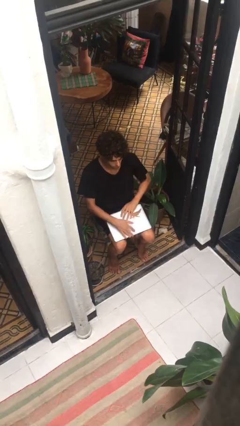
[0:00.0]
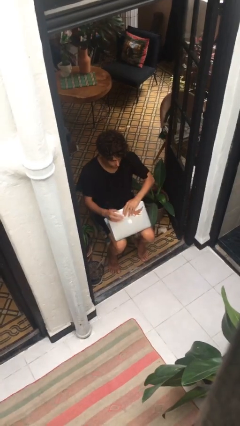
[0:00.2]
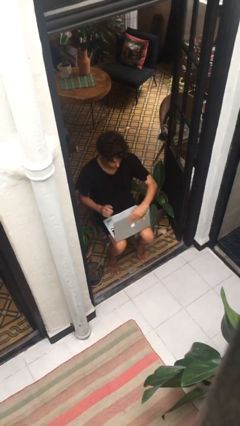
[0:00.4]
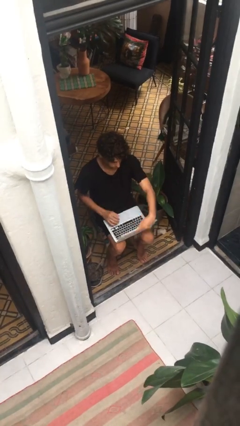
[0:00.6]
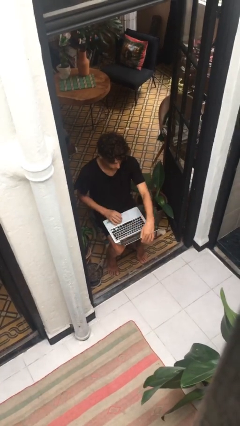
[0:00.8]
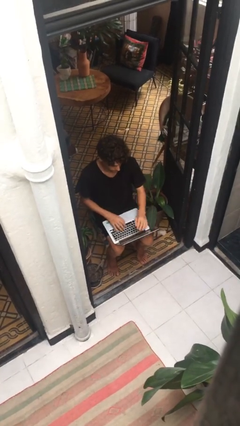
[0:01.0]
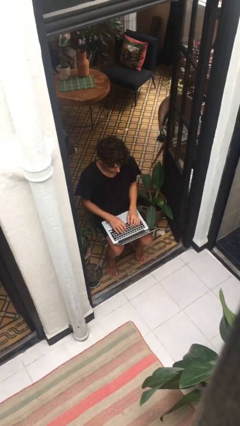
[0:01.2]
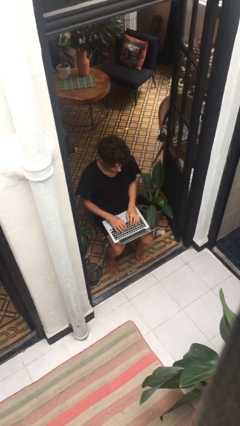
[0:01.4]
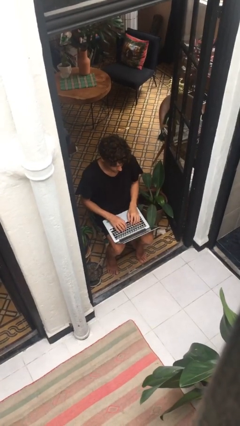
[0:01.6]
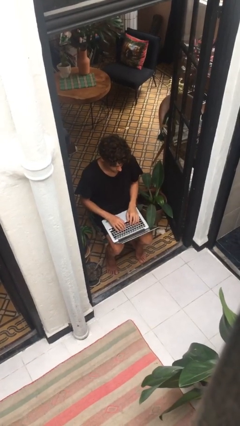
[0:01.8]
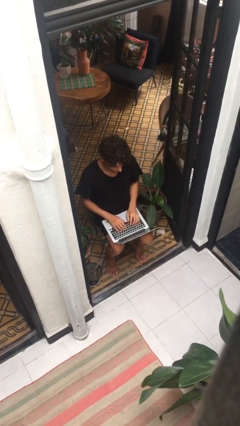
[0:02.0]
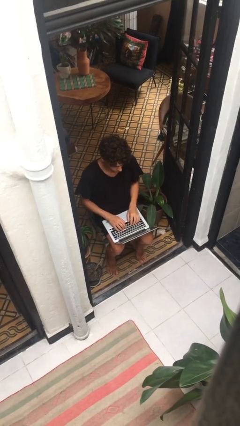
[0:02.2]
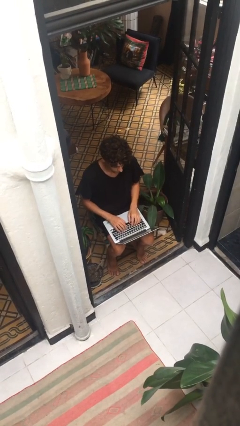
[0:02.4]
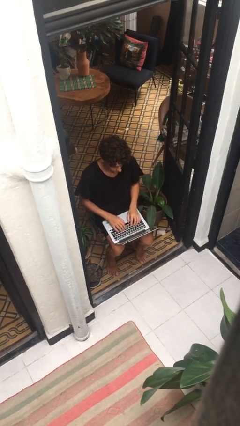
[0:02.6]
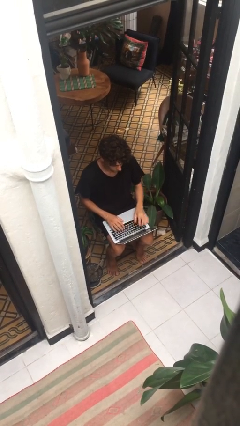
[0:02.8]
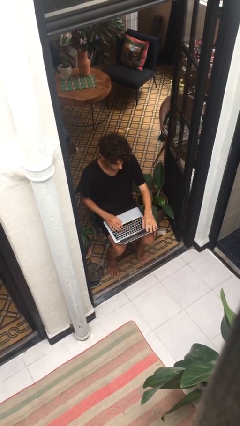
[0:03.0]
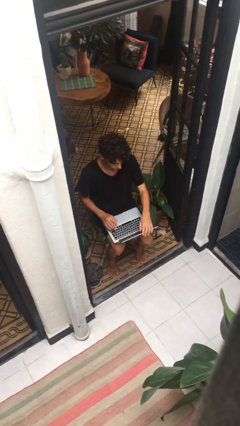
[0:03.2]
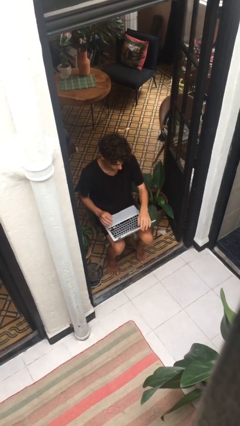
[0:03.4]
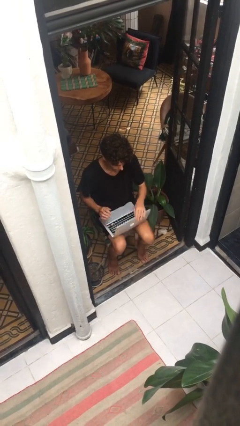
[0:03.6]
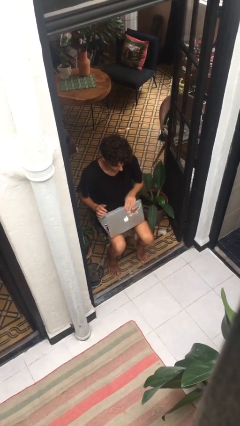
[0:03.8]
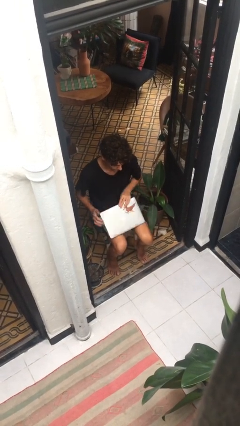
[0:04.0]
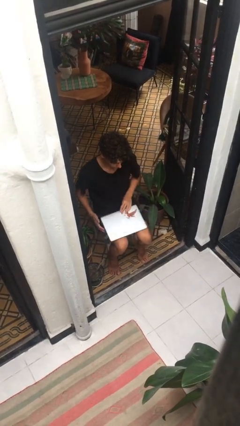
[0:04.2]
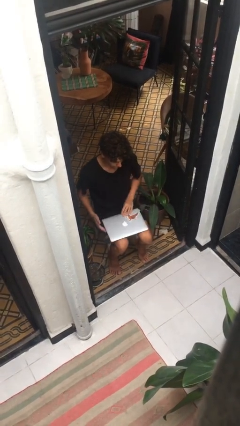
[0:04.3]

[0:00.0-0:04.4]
person interacts with laptop

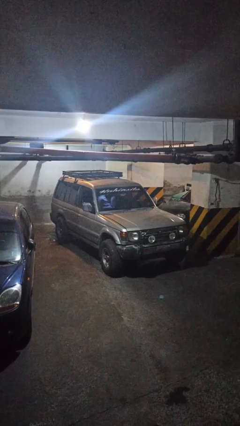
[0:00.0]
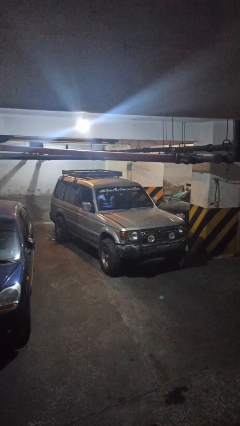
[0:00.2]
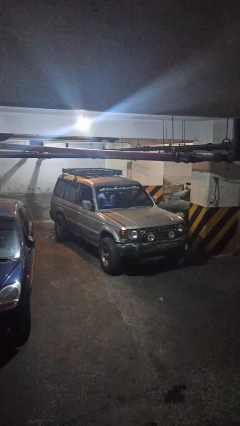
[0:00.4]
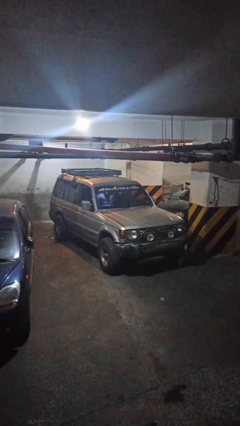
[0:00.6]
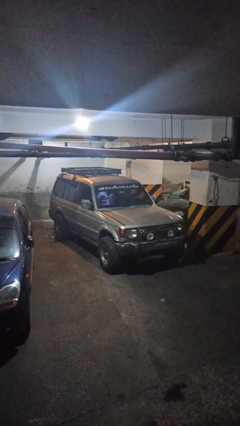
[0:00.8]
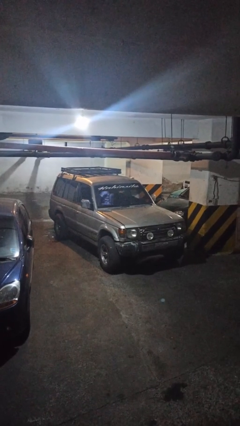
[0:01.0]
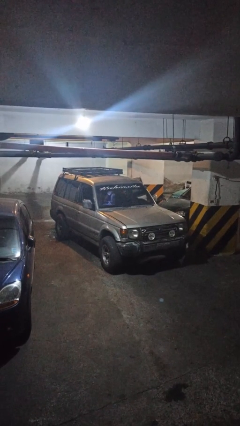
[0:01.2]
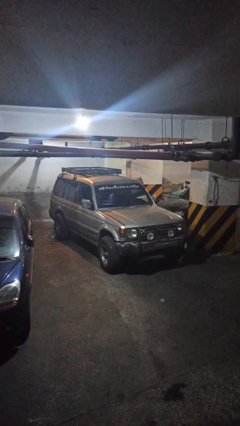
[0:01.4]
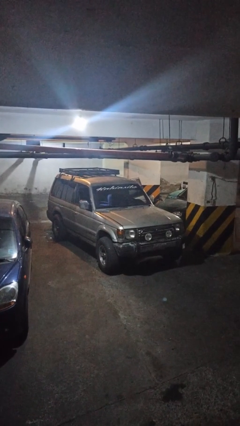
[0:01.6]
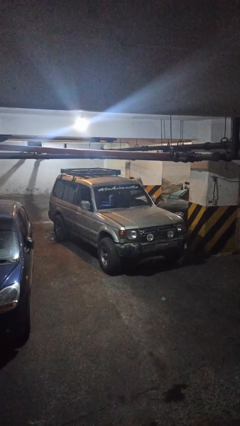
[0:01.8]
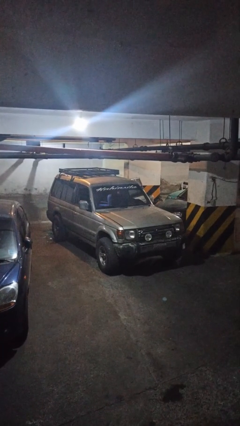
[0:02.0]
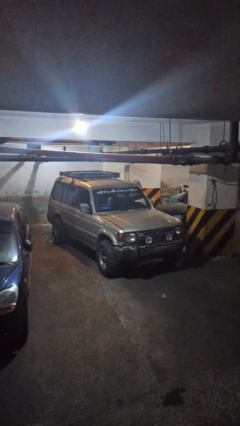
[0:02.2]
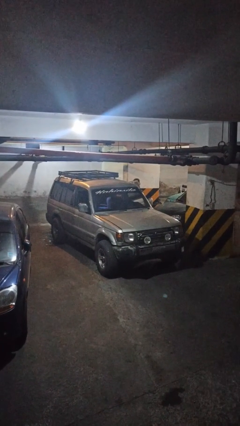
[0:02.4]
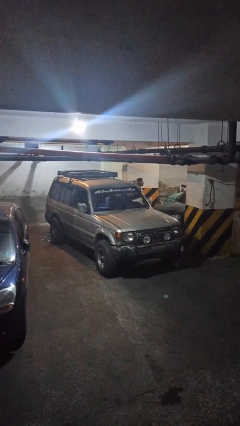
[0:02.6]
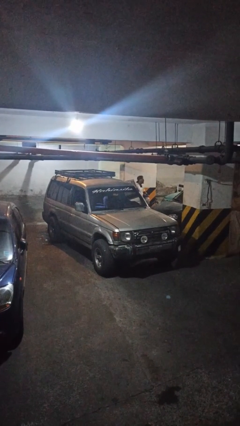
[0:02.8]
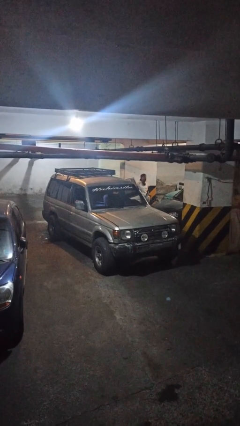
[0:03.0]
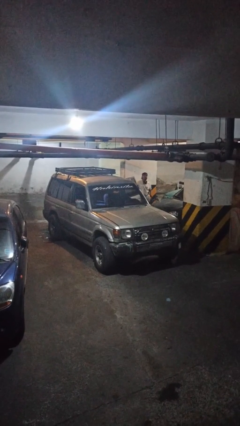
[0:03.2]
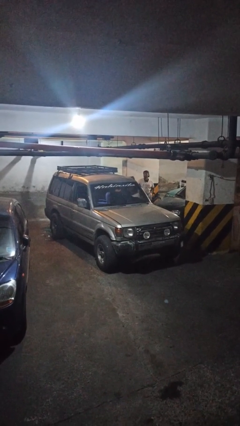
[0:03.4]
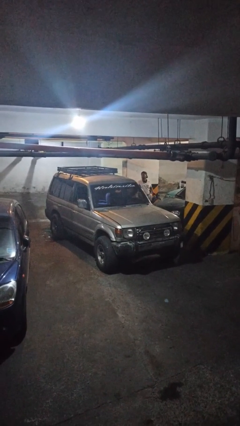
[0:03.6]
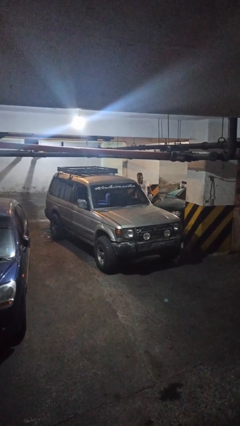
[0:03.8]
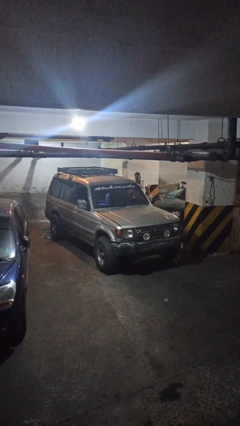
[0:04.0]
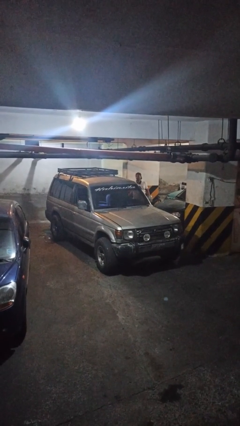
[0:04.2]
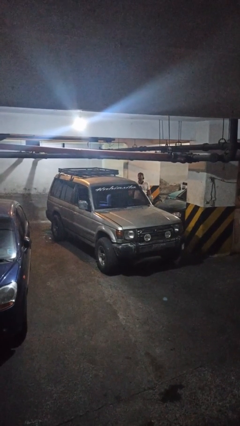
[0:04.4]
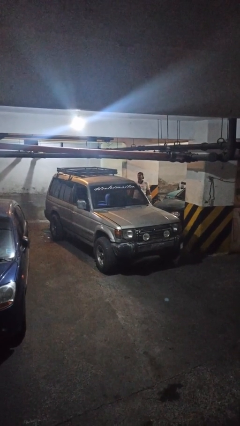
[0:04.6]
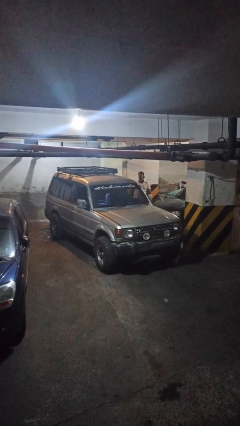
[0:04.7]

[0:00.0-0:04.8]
car drops off person

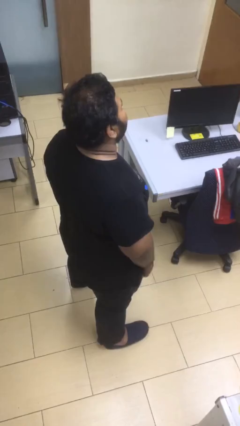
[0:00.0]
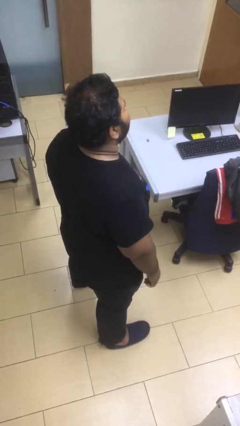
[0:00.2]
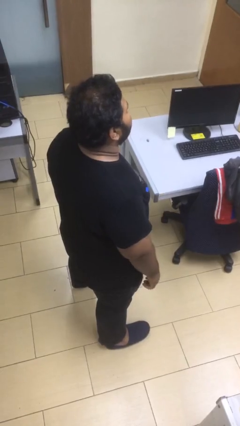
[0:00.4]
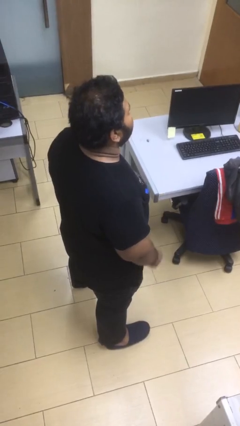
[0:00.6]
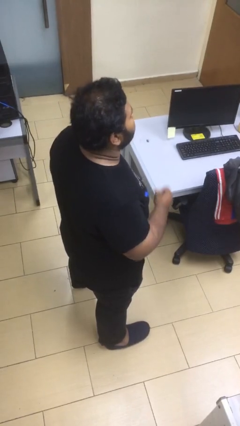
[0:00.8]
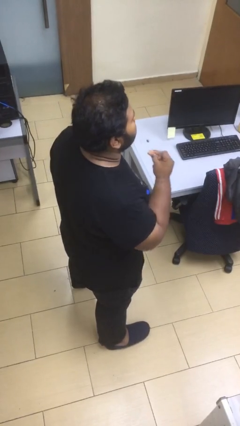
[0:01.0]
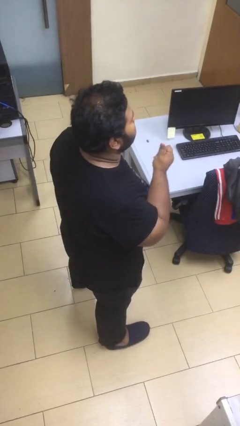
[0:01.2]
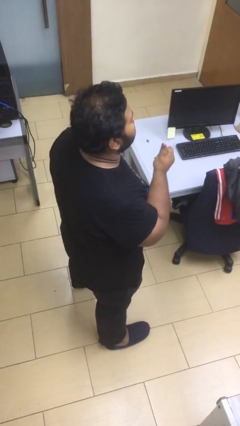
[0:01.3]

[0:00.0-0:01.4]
person snaps fingers

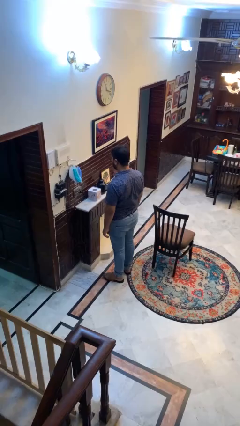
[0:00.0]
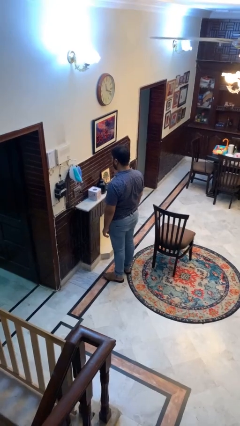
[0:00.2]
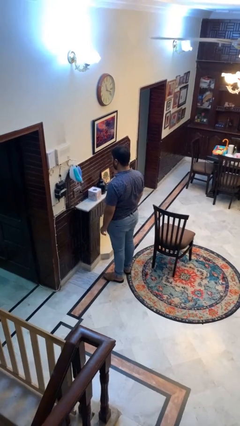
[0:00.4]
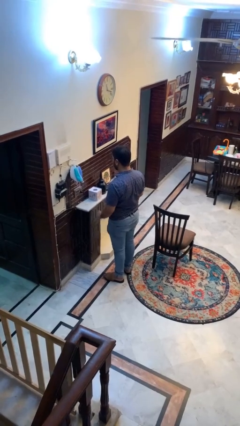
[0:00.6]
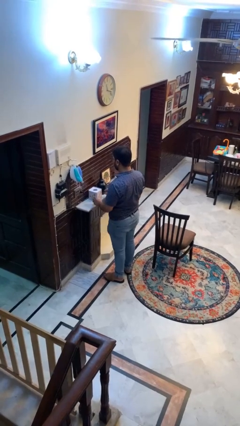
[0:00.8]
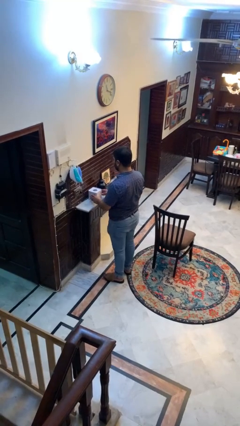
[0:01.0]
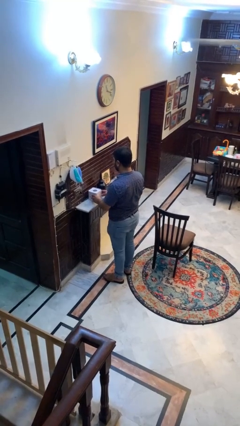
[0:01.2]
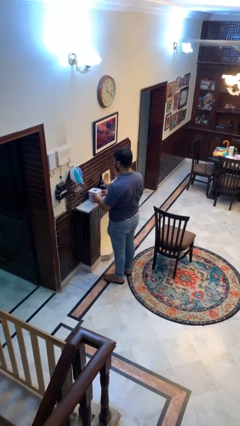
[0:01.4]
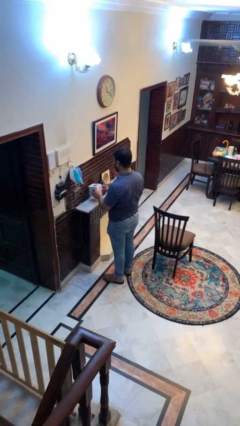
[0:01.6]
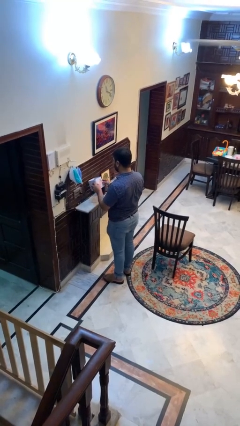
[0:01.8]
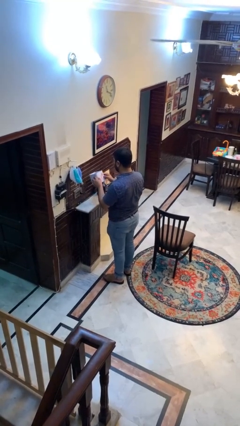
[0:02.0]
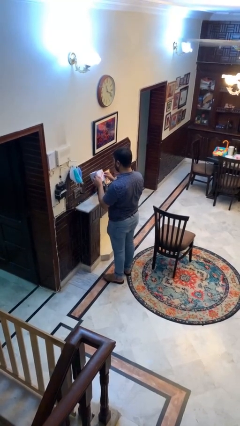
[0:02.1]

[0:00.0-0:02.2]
person picks up object from countertop

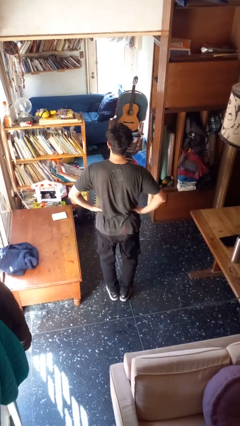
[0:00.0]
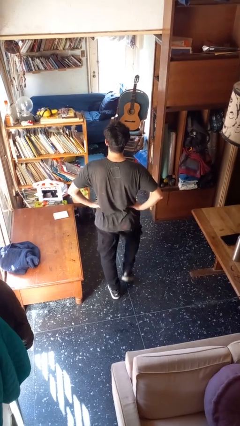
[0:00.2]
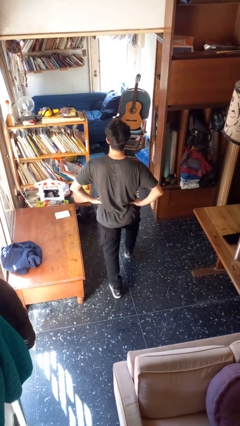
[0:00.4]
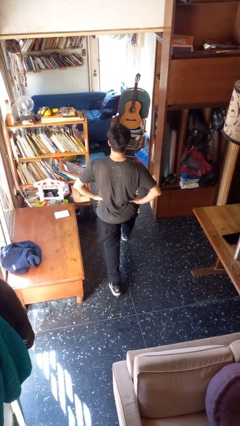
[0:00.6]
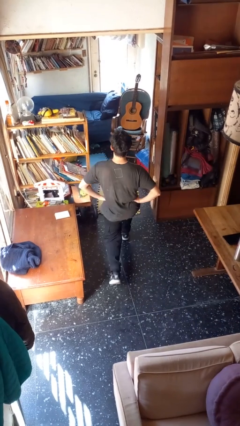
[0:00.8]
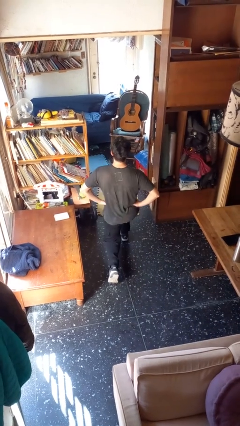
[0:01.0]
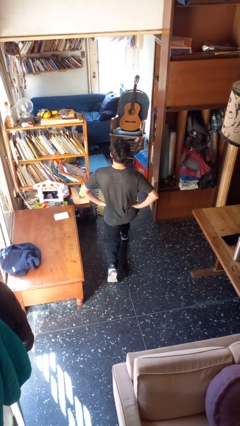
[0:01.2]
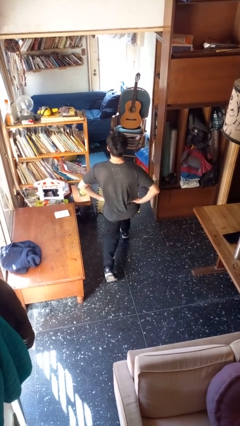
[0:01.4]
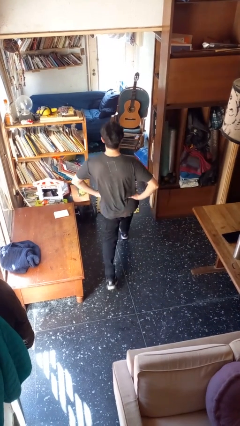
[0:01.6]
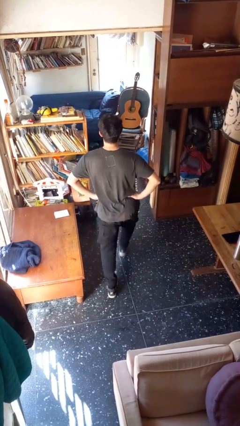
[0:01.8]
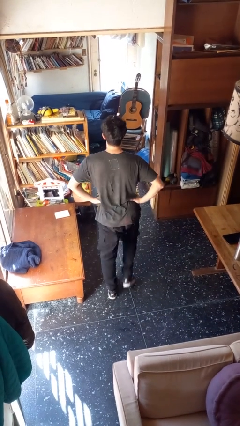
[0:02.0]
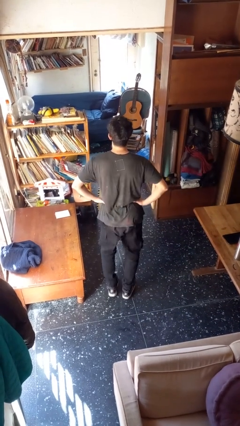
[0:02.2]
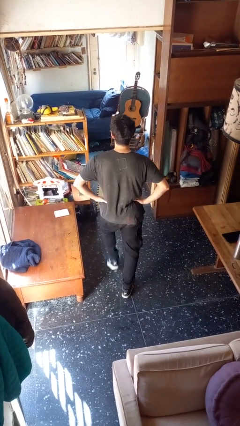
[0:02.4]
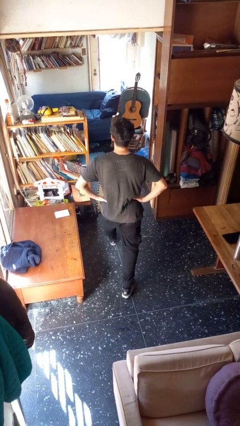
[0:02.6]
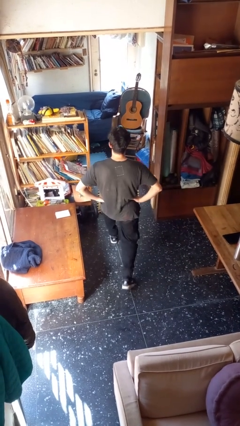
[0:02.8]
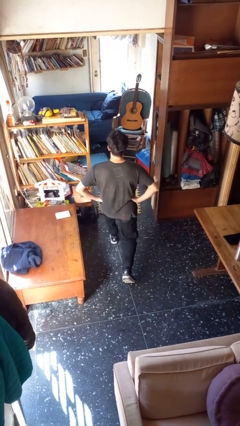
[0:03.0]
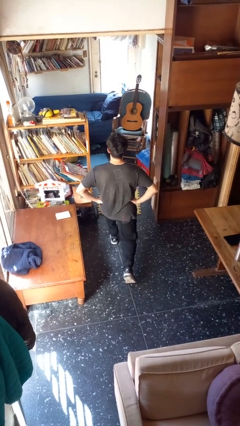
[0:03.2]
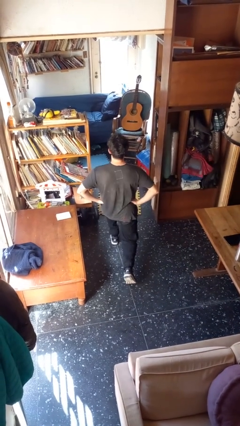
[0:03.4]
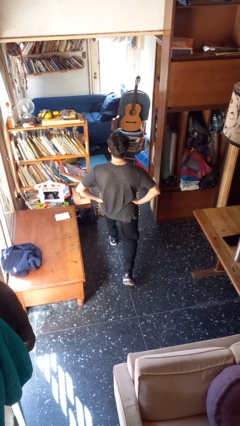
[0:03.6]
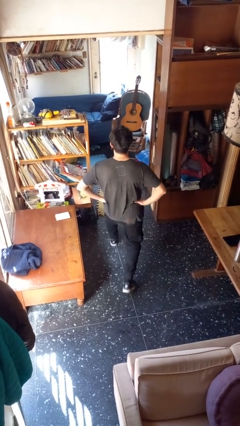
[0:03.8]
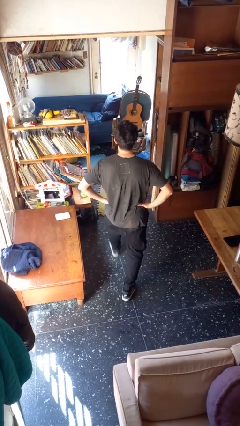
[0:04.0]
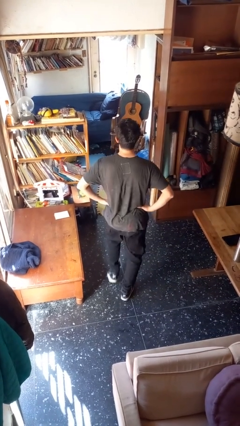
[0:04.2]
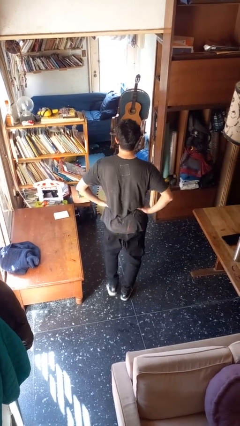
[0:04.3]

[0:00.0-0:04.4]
person exercises with lunges
